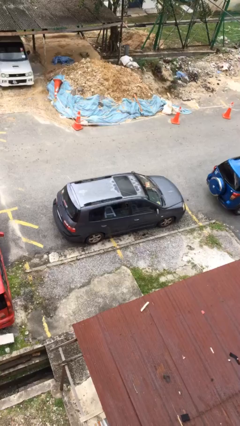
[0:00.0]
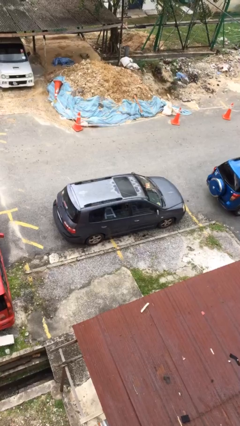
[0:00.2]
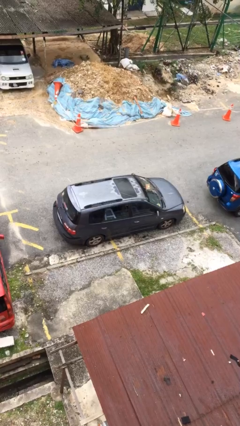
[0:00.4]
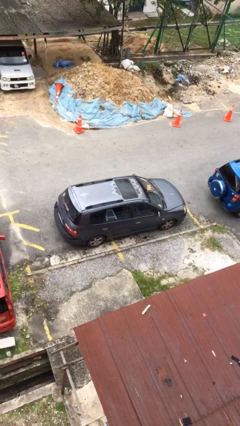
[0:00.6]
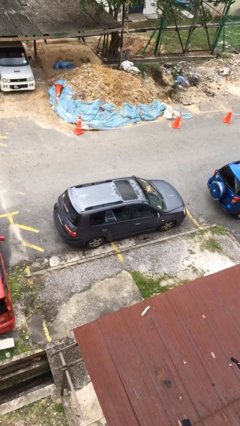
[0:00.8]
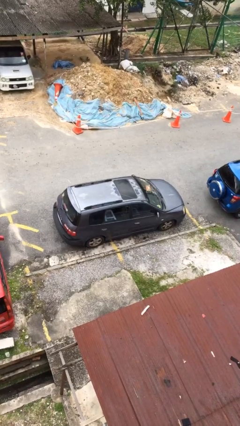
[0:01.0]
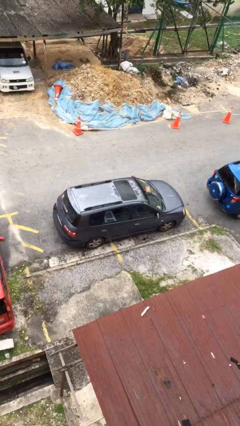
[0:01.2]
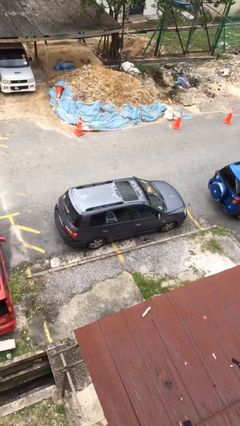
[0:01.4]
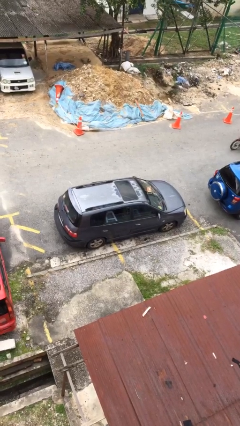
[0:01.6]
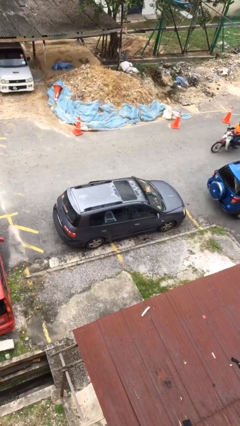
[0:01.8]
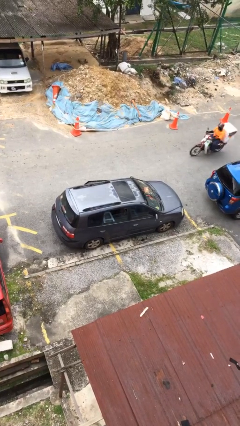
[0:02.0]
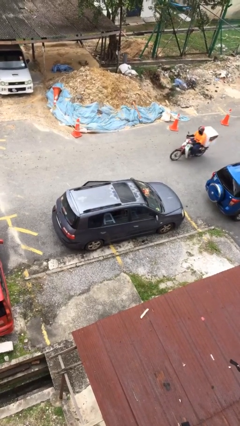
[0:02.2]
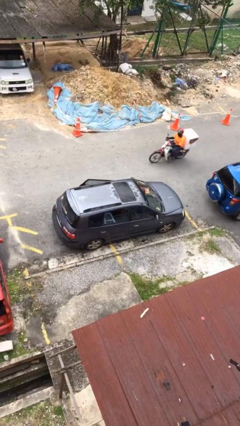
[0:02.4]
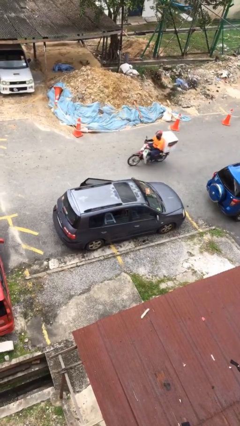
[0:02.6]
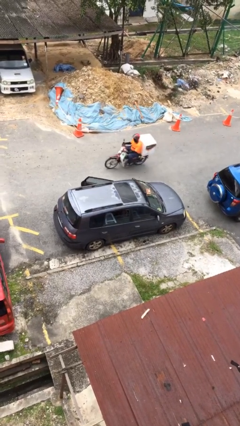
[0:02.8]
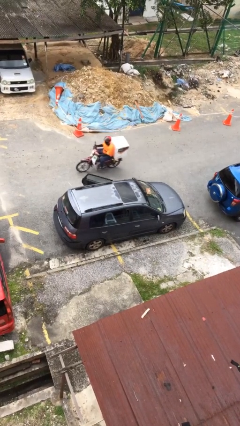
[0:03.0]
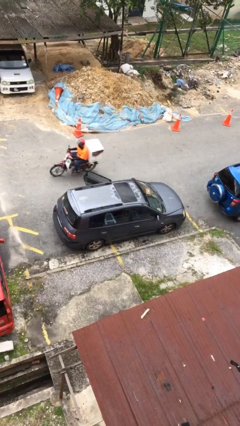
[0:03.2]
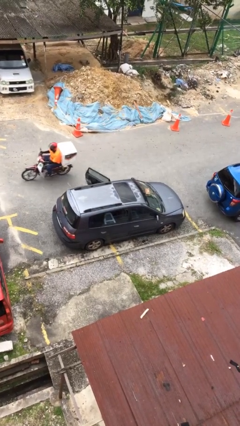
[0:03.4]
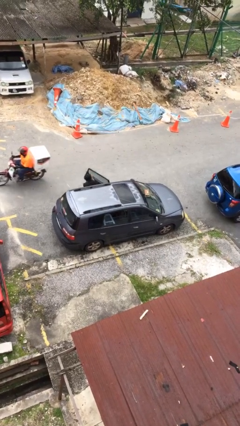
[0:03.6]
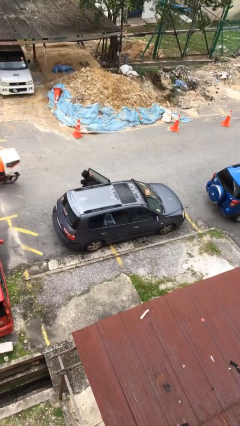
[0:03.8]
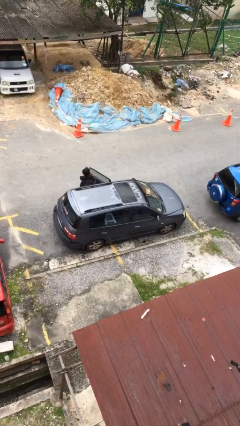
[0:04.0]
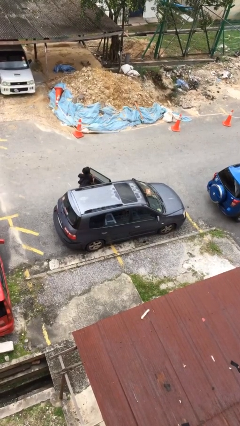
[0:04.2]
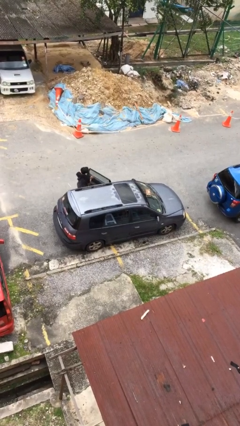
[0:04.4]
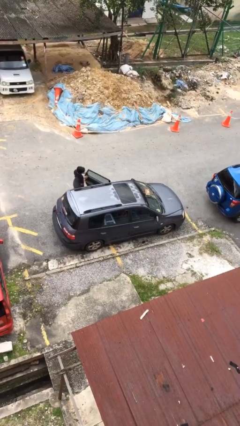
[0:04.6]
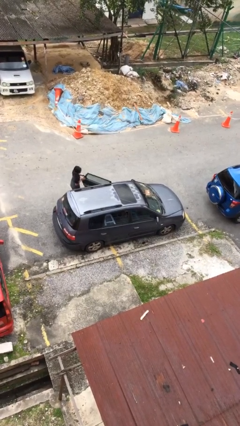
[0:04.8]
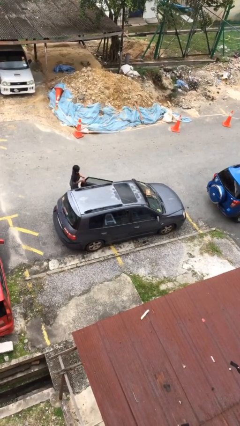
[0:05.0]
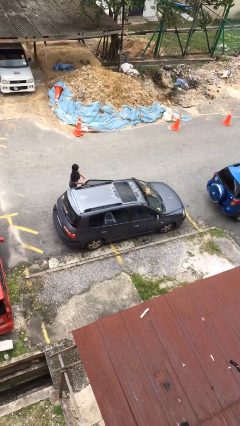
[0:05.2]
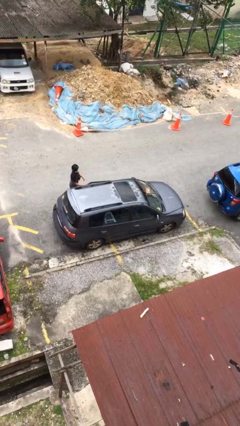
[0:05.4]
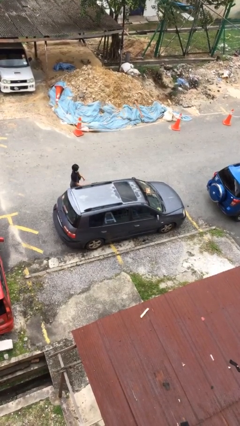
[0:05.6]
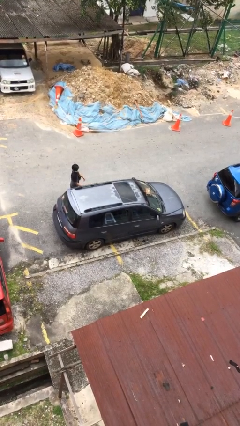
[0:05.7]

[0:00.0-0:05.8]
car drops off person

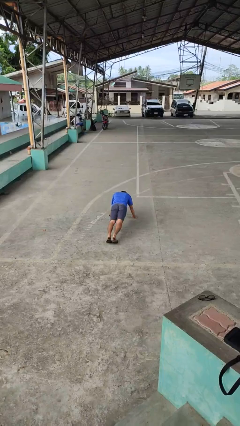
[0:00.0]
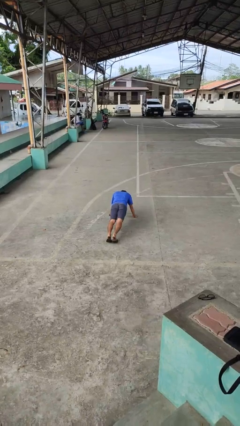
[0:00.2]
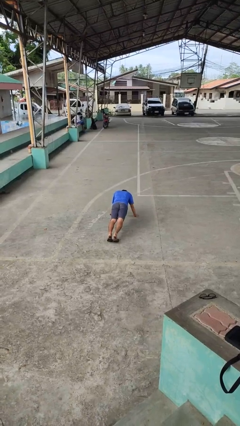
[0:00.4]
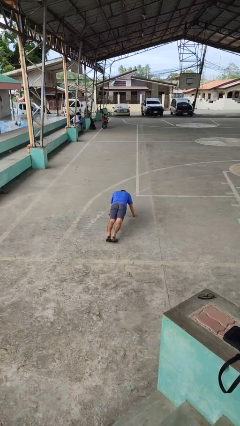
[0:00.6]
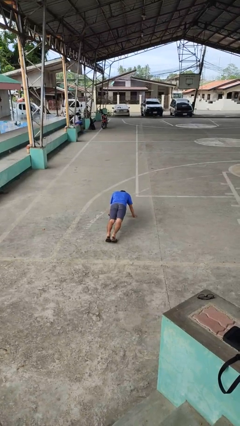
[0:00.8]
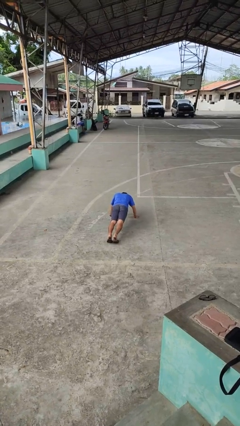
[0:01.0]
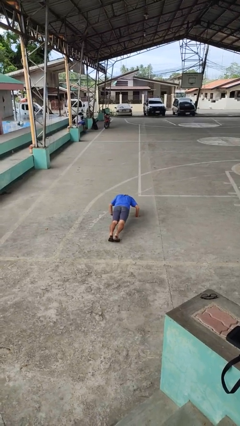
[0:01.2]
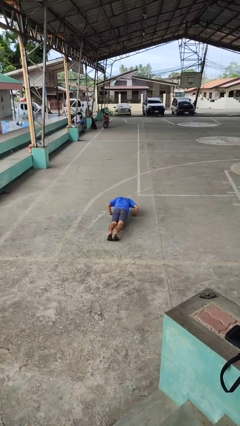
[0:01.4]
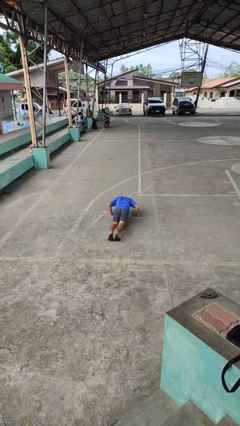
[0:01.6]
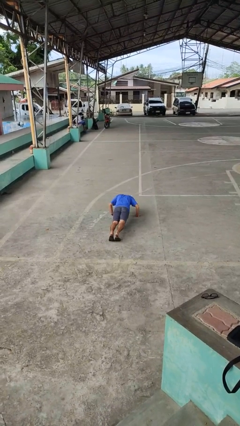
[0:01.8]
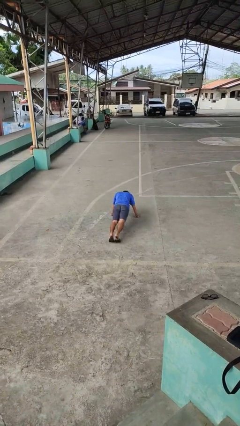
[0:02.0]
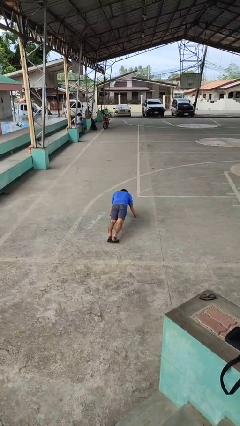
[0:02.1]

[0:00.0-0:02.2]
person exercises with pushup

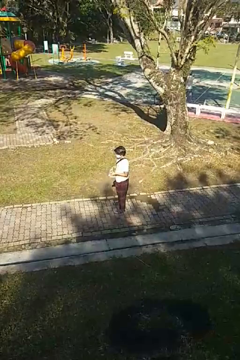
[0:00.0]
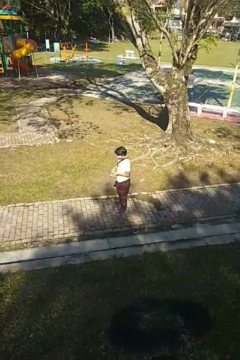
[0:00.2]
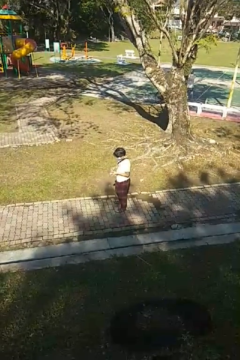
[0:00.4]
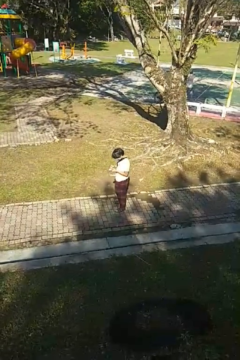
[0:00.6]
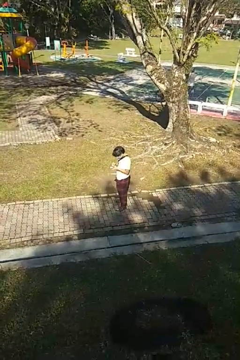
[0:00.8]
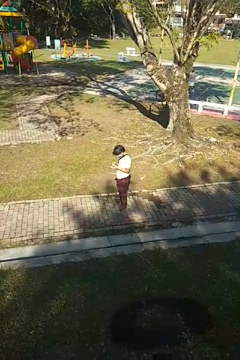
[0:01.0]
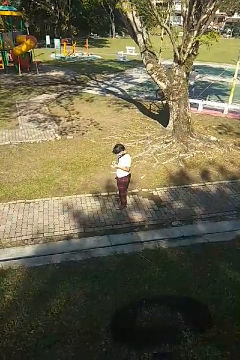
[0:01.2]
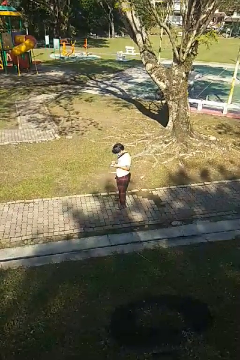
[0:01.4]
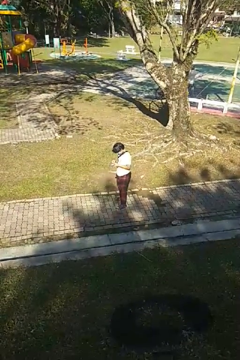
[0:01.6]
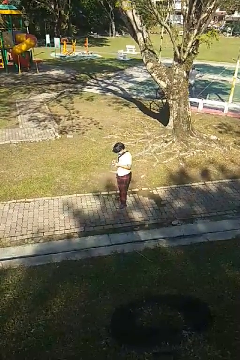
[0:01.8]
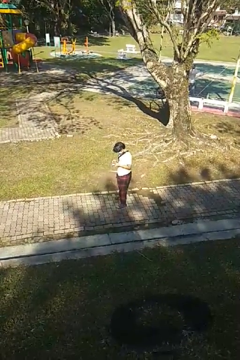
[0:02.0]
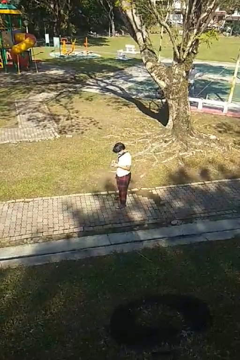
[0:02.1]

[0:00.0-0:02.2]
person searches in purse

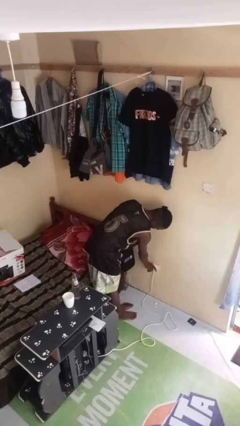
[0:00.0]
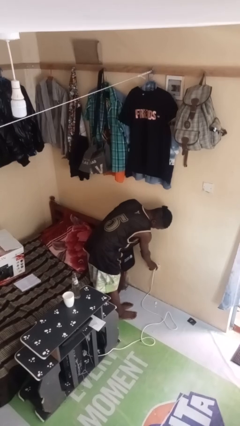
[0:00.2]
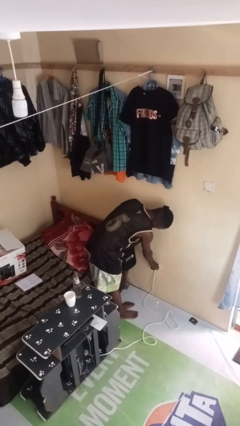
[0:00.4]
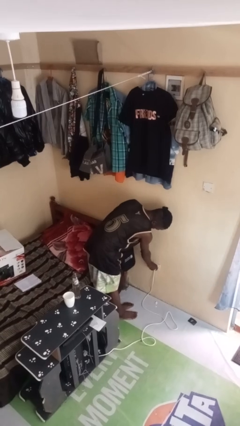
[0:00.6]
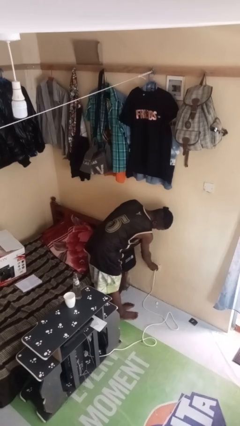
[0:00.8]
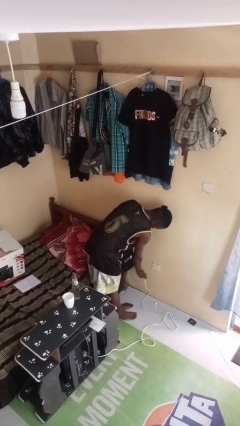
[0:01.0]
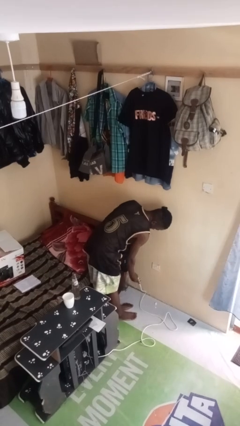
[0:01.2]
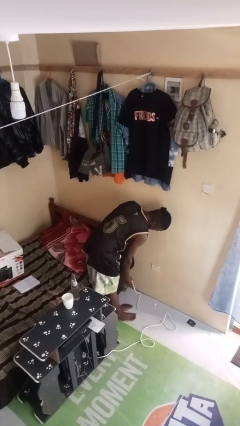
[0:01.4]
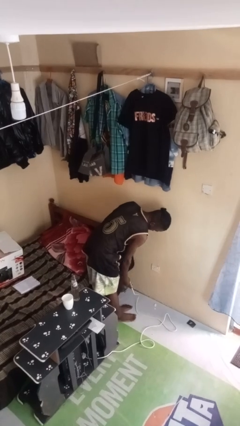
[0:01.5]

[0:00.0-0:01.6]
person unplugs from electrical socket

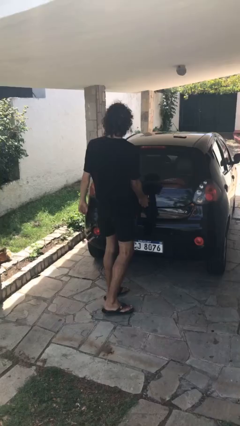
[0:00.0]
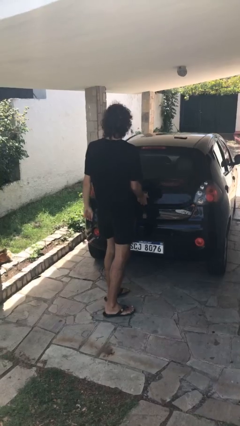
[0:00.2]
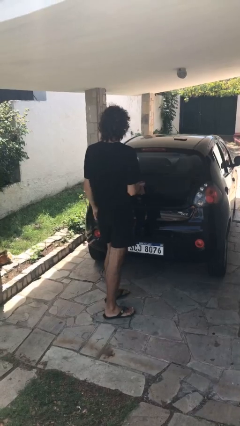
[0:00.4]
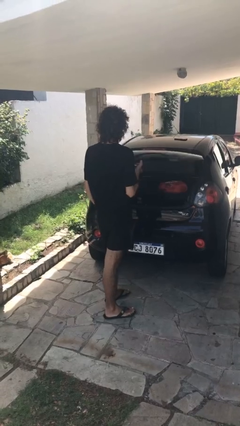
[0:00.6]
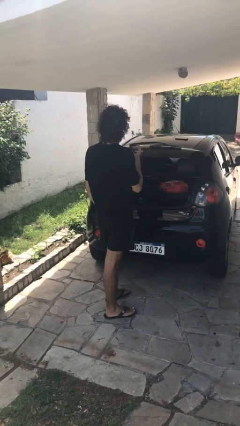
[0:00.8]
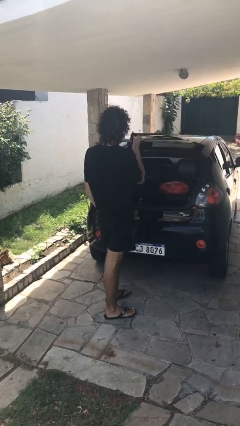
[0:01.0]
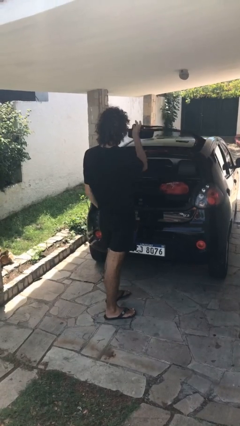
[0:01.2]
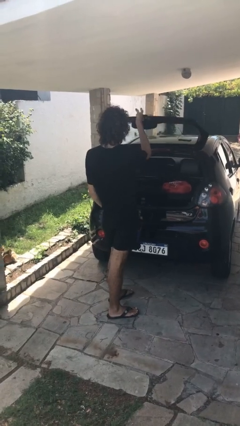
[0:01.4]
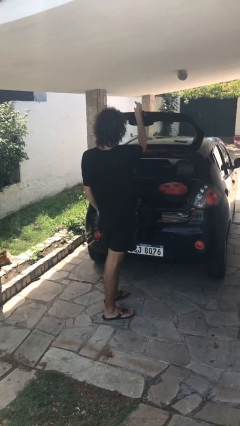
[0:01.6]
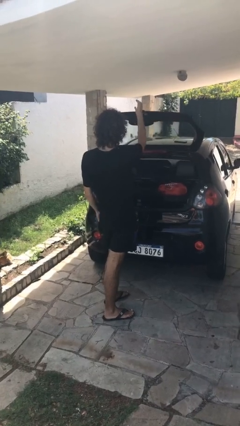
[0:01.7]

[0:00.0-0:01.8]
person opens car trunk

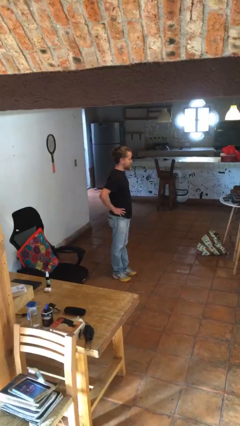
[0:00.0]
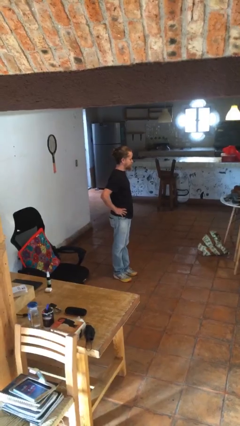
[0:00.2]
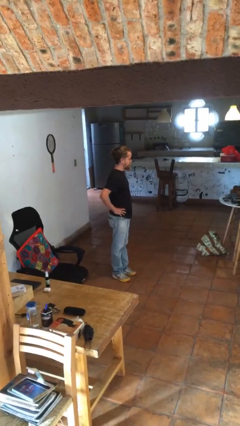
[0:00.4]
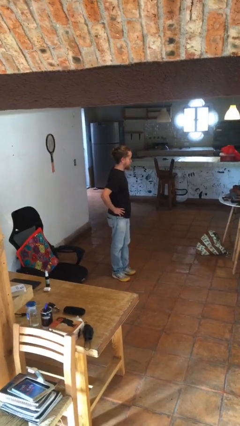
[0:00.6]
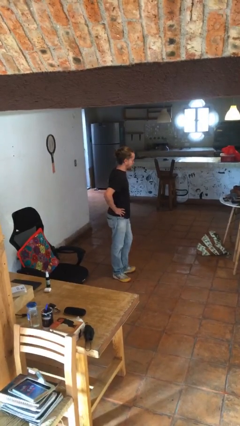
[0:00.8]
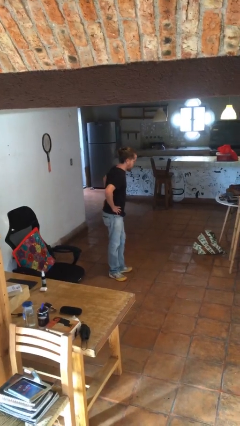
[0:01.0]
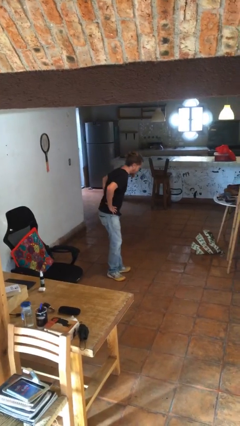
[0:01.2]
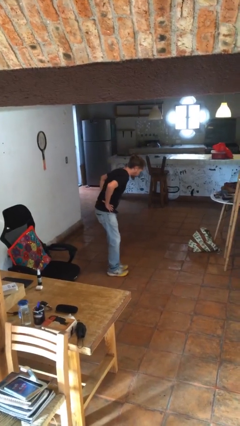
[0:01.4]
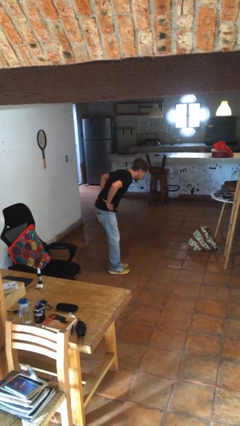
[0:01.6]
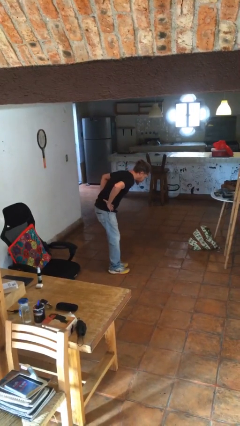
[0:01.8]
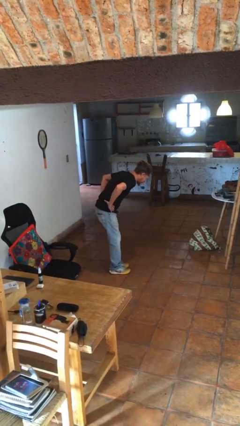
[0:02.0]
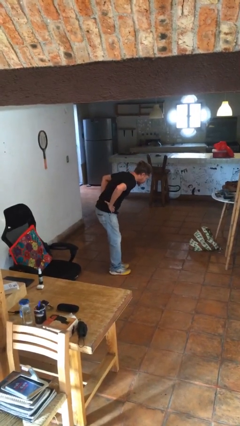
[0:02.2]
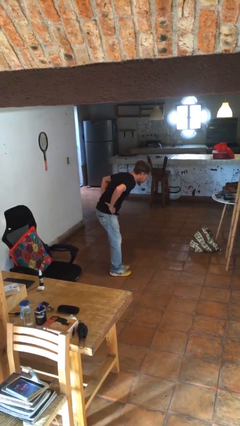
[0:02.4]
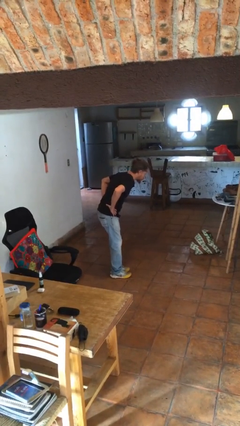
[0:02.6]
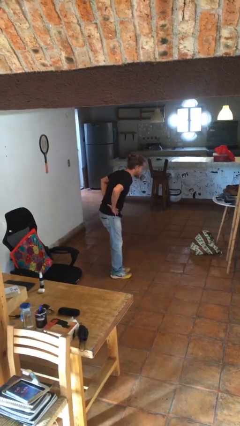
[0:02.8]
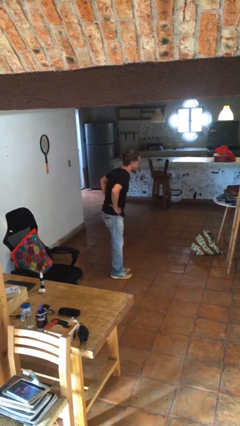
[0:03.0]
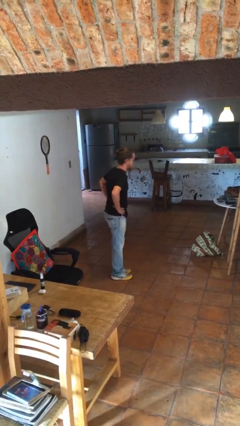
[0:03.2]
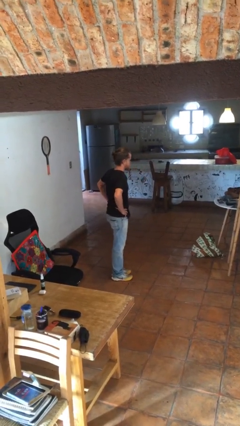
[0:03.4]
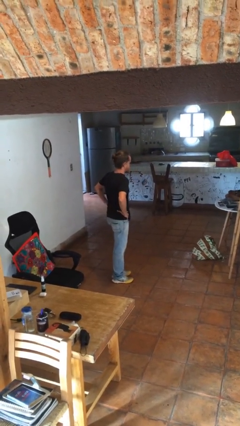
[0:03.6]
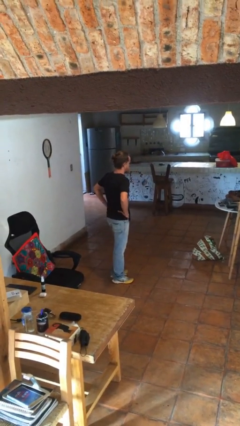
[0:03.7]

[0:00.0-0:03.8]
person bows

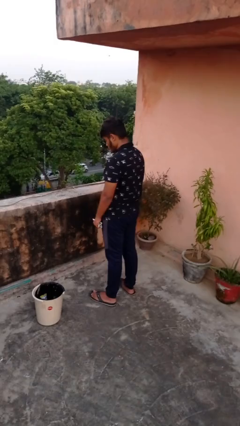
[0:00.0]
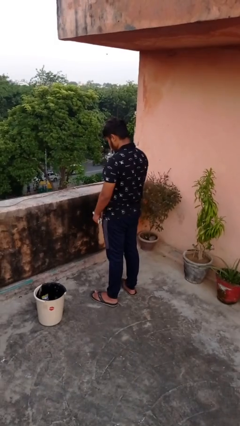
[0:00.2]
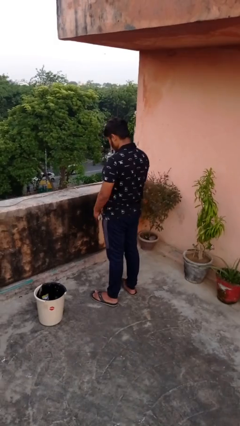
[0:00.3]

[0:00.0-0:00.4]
person discards trash

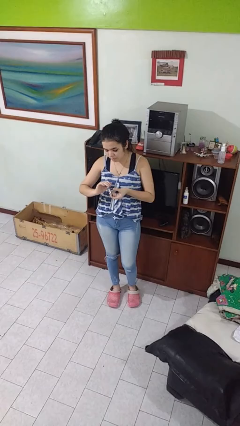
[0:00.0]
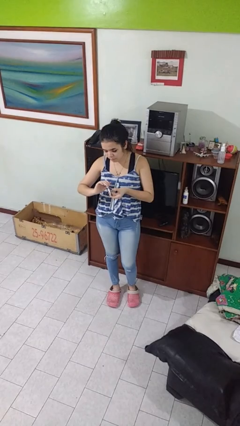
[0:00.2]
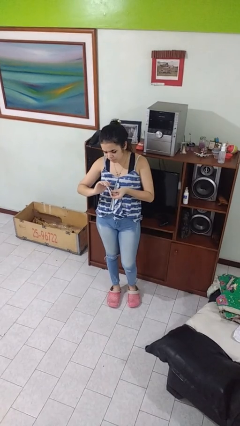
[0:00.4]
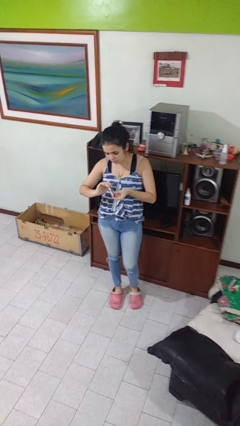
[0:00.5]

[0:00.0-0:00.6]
person clips fingernails
